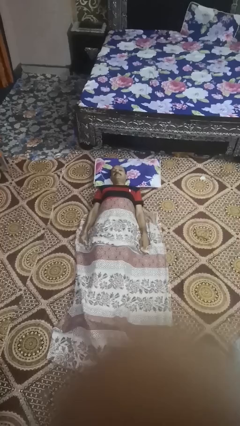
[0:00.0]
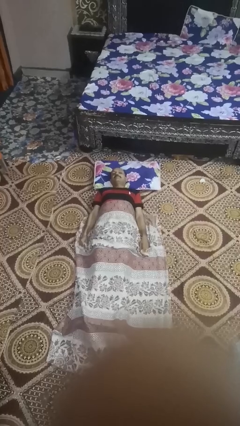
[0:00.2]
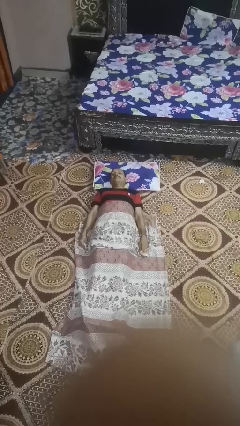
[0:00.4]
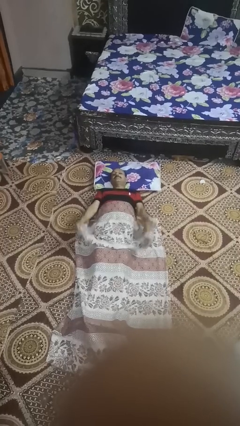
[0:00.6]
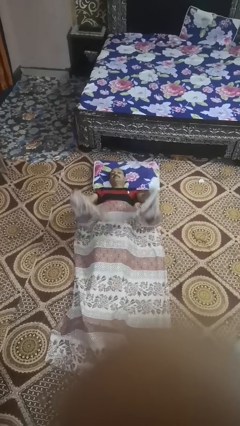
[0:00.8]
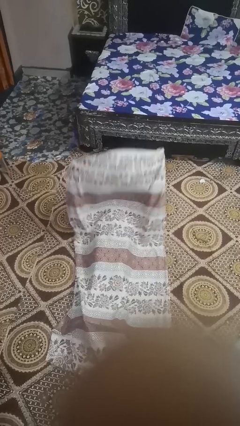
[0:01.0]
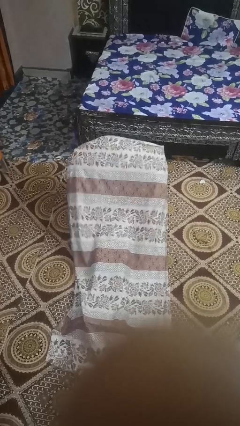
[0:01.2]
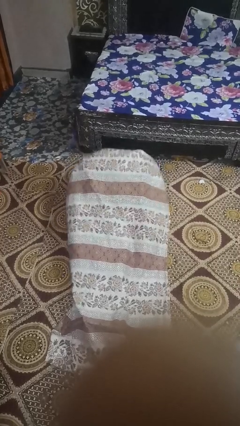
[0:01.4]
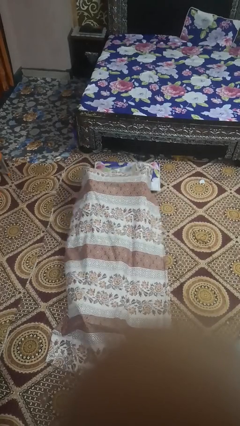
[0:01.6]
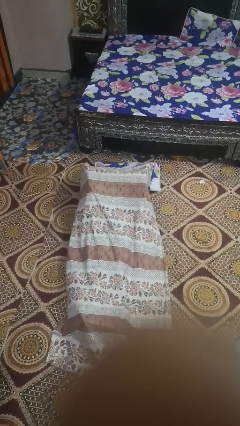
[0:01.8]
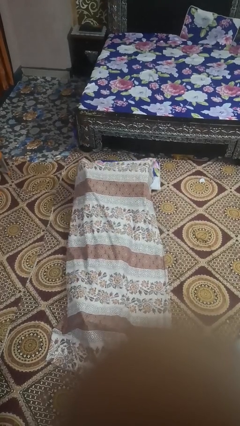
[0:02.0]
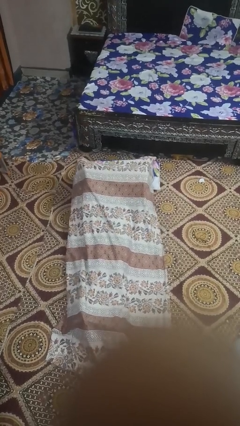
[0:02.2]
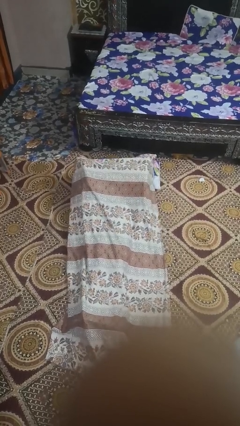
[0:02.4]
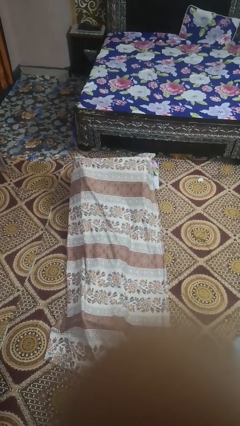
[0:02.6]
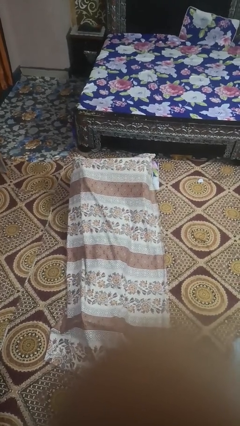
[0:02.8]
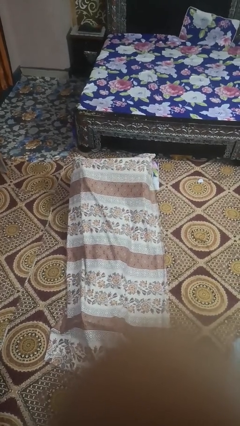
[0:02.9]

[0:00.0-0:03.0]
person covers with bedsheets

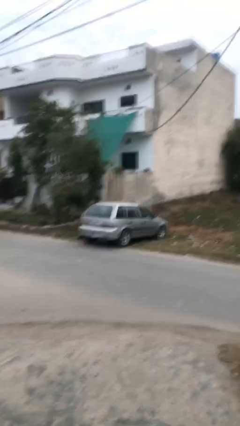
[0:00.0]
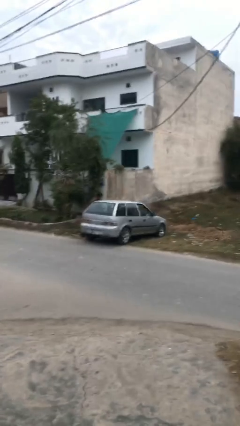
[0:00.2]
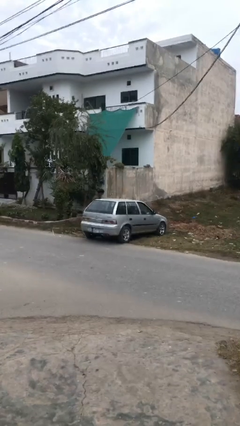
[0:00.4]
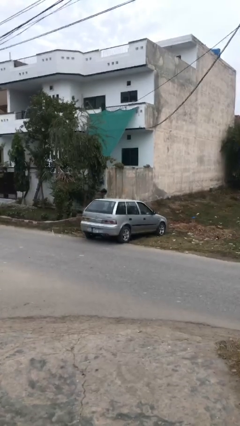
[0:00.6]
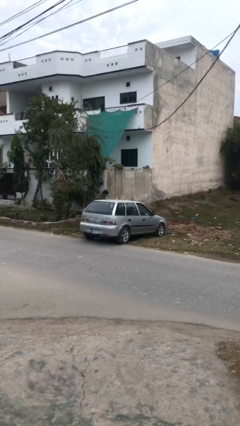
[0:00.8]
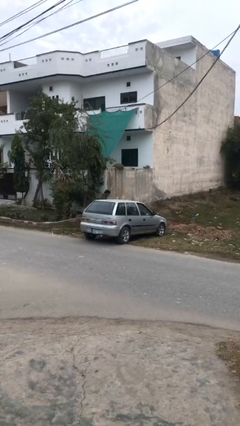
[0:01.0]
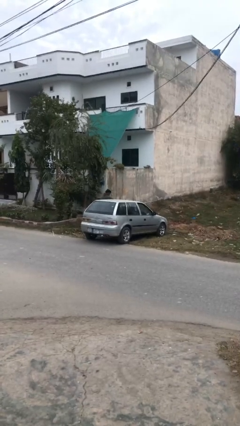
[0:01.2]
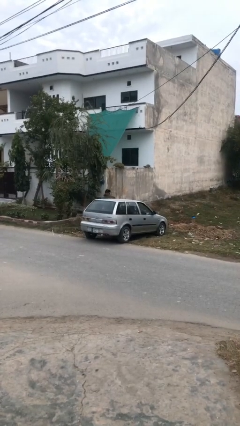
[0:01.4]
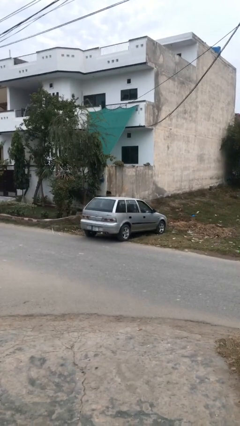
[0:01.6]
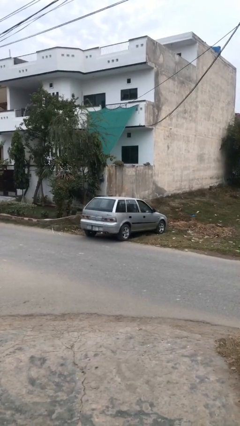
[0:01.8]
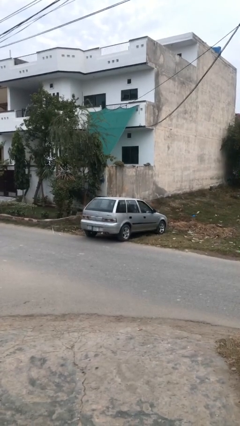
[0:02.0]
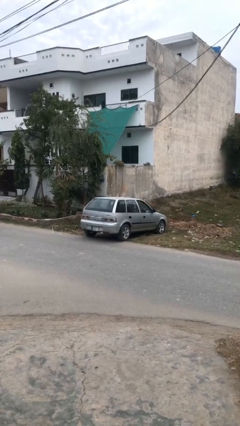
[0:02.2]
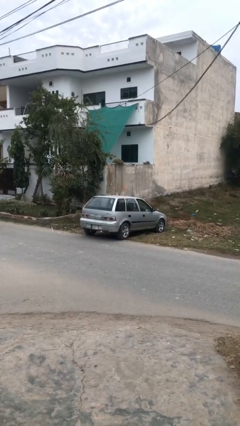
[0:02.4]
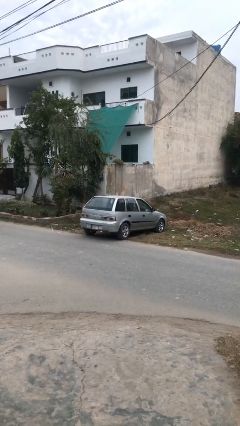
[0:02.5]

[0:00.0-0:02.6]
car picks up person

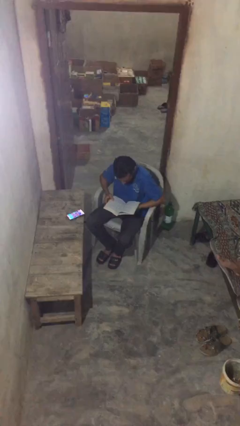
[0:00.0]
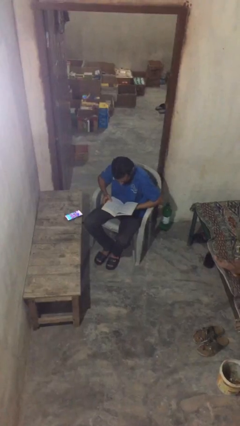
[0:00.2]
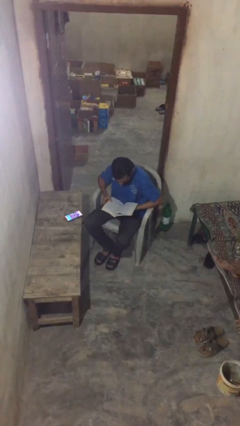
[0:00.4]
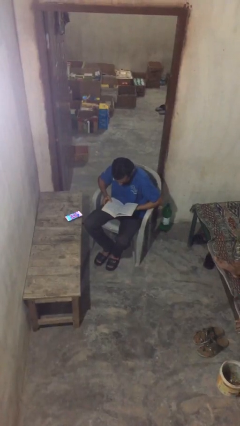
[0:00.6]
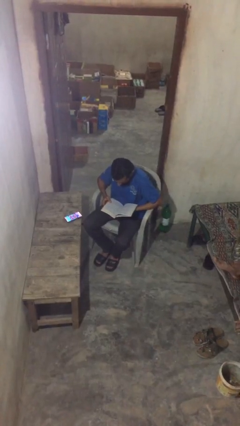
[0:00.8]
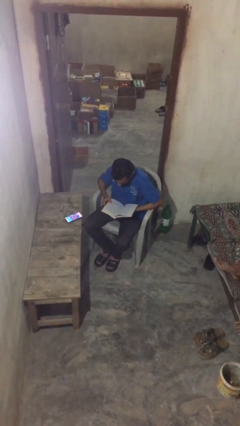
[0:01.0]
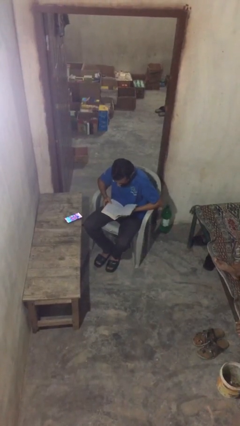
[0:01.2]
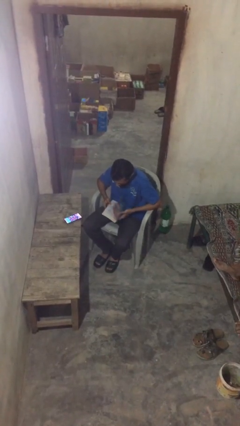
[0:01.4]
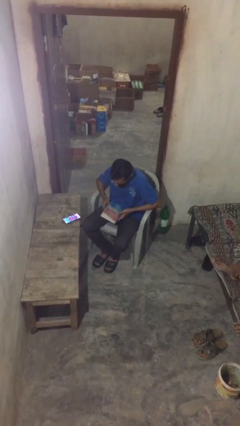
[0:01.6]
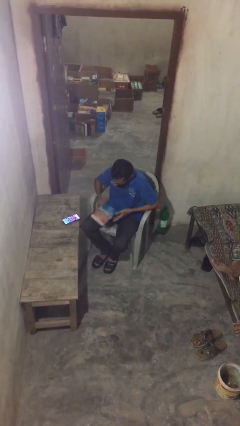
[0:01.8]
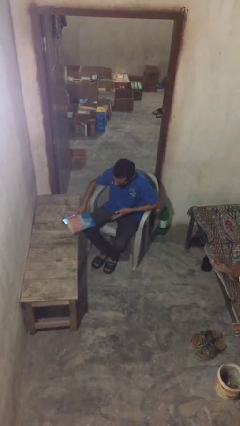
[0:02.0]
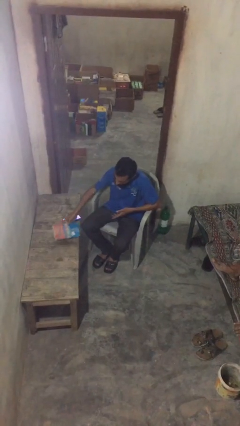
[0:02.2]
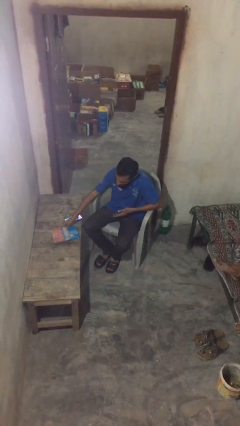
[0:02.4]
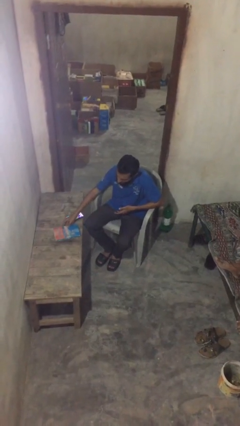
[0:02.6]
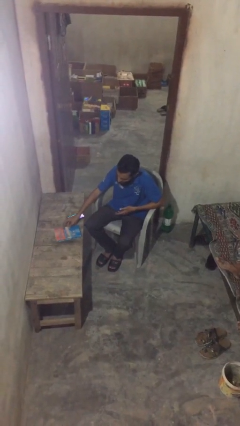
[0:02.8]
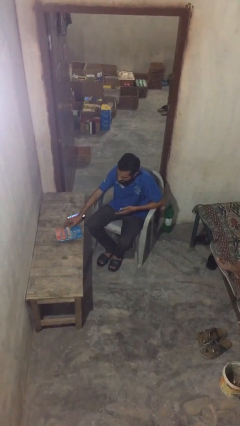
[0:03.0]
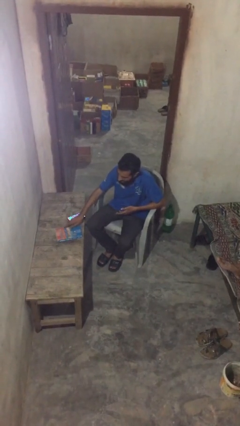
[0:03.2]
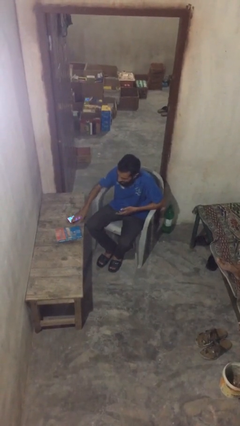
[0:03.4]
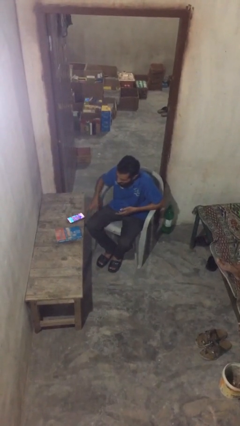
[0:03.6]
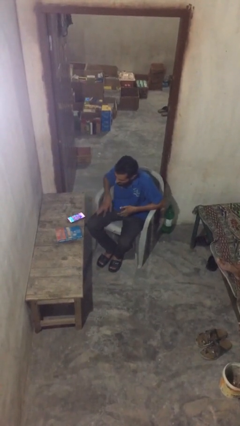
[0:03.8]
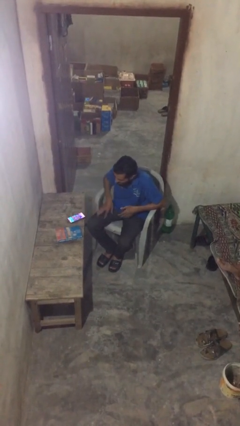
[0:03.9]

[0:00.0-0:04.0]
person puts down object on table

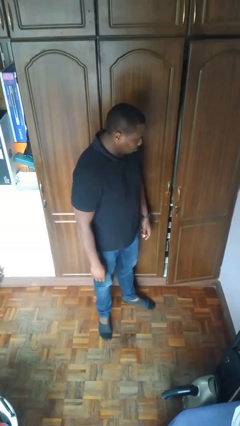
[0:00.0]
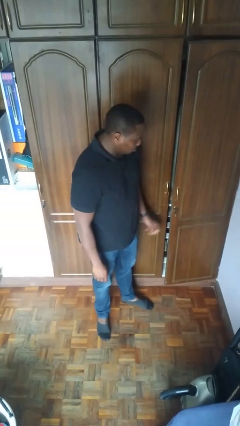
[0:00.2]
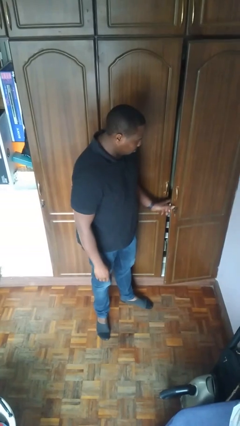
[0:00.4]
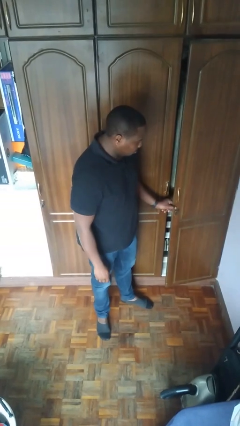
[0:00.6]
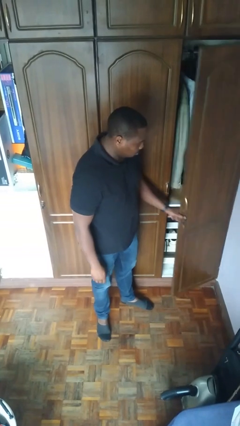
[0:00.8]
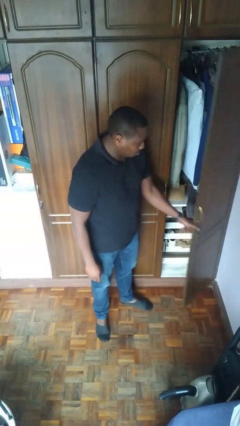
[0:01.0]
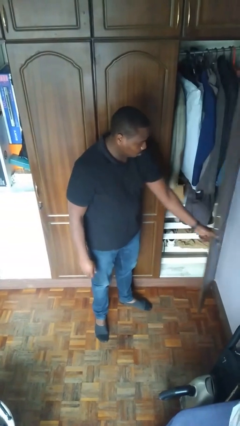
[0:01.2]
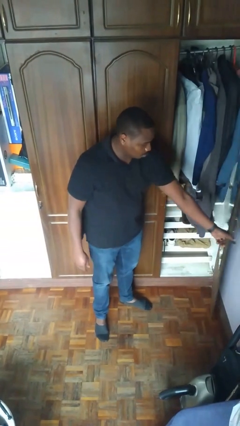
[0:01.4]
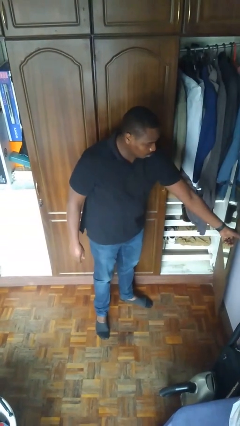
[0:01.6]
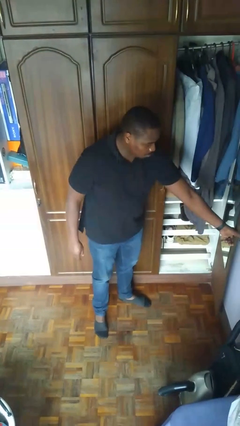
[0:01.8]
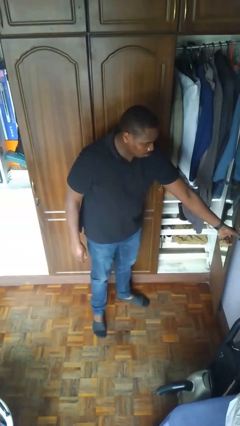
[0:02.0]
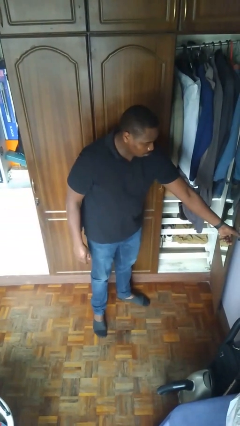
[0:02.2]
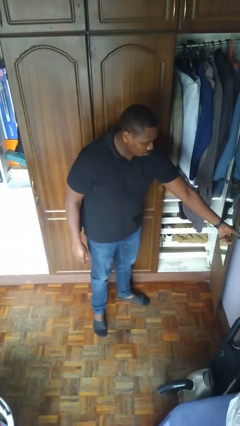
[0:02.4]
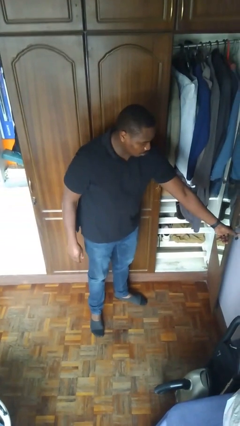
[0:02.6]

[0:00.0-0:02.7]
person opens closet door

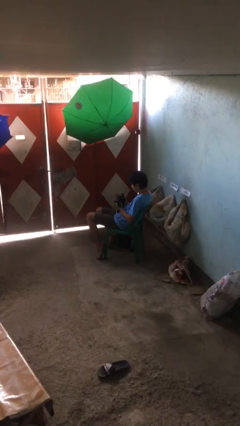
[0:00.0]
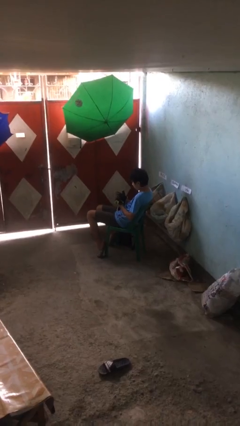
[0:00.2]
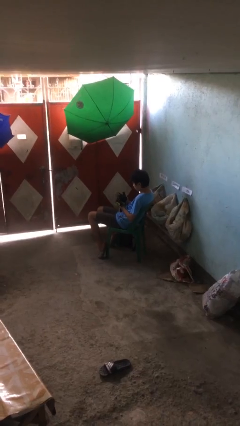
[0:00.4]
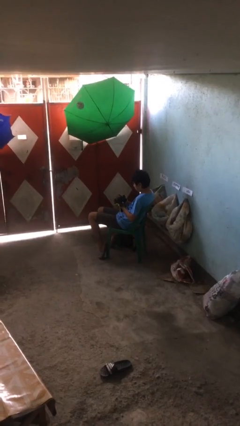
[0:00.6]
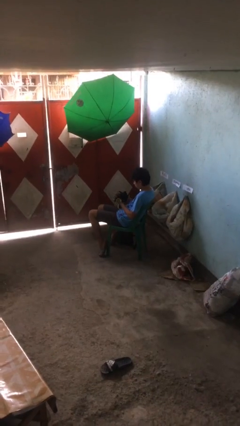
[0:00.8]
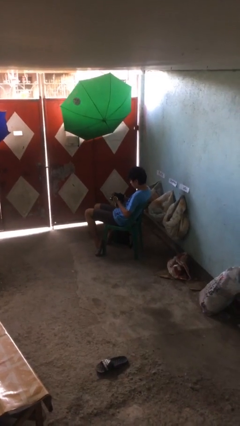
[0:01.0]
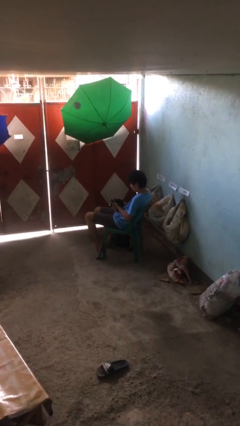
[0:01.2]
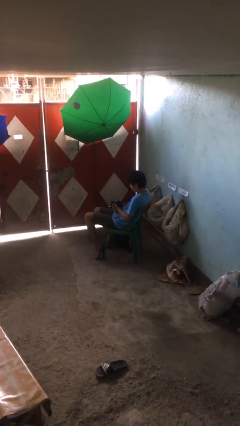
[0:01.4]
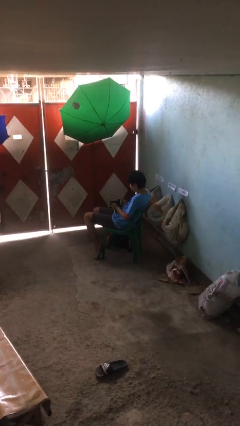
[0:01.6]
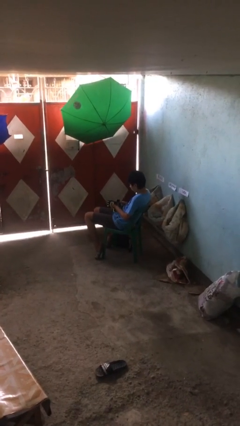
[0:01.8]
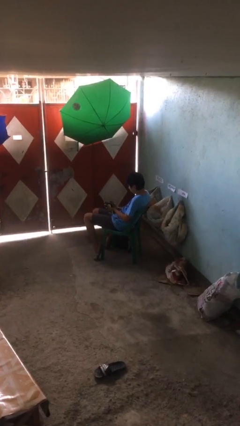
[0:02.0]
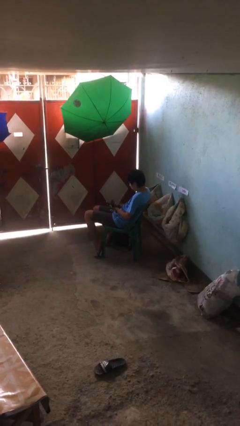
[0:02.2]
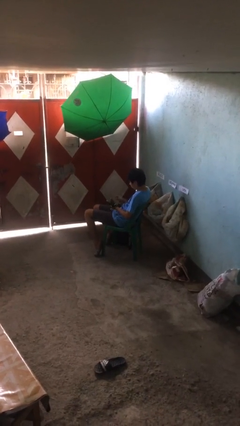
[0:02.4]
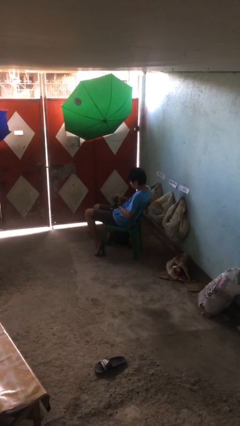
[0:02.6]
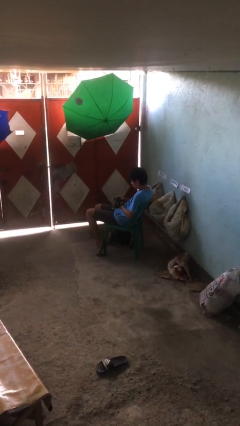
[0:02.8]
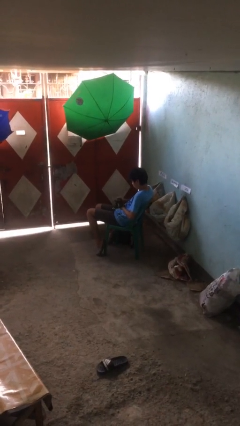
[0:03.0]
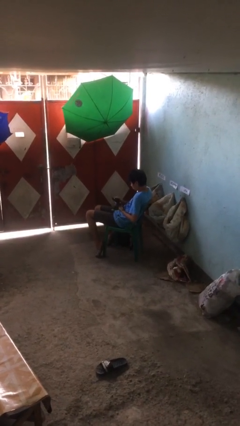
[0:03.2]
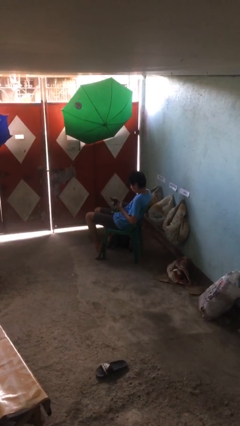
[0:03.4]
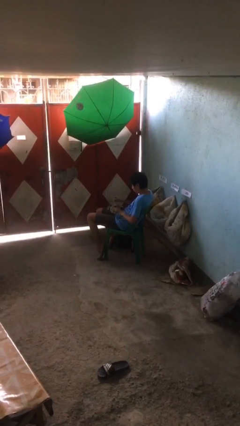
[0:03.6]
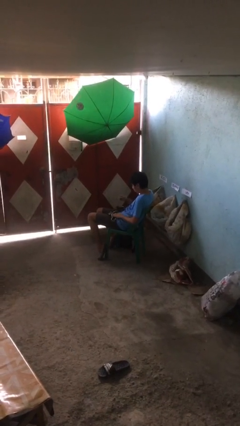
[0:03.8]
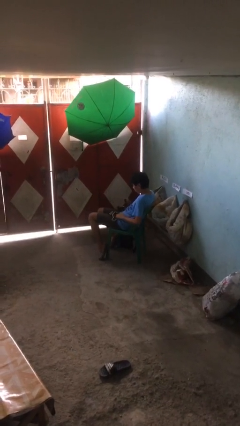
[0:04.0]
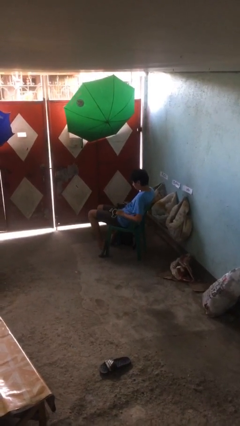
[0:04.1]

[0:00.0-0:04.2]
person takes off gloves

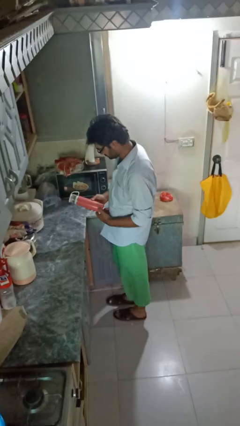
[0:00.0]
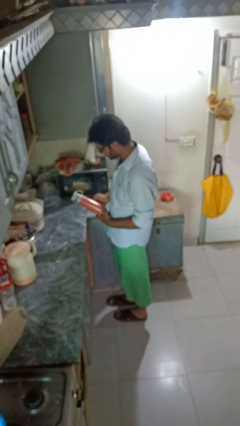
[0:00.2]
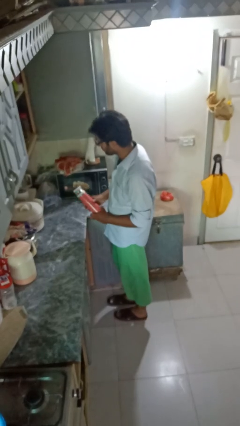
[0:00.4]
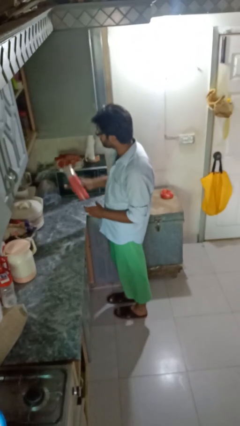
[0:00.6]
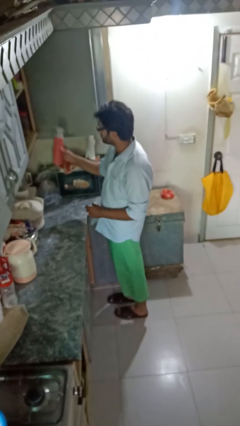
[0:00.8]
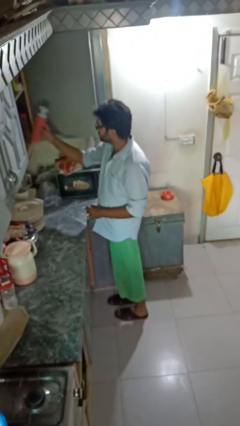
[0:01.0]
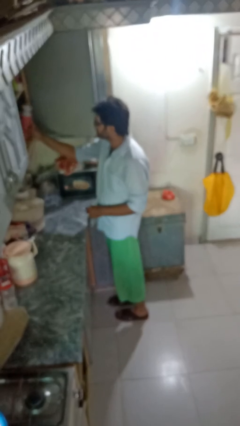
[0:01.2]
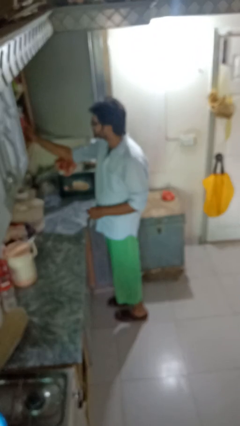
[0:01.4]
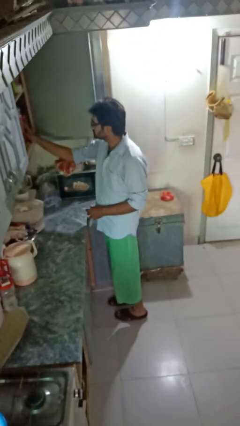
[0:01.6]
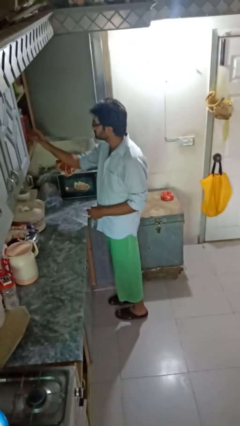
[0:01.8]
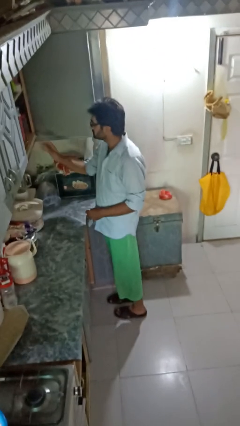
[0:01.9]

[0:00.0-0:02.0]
person puts down object into cabinet
